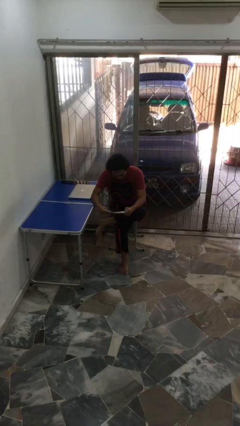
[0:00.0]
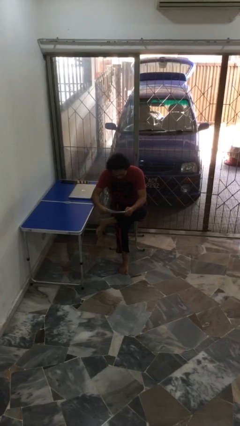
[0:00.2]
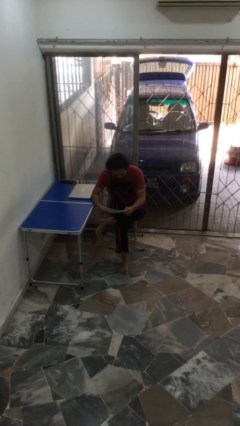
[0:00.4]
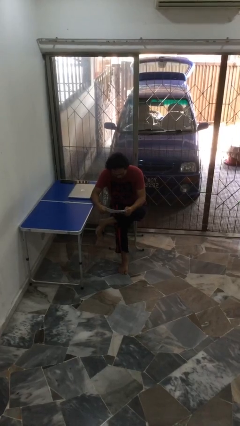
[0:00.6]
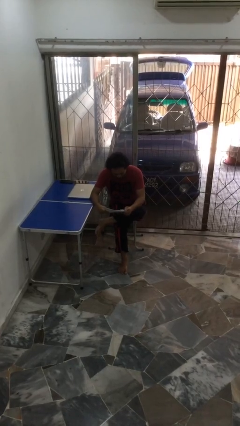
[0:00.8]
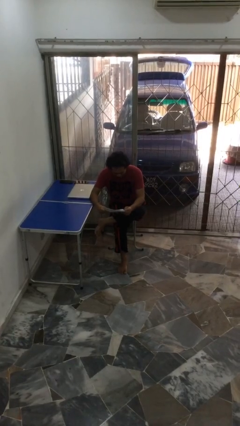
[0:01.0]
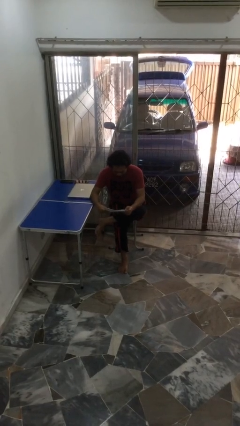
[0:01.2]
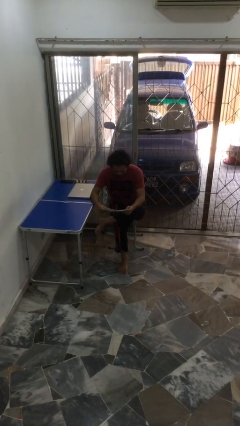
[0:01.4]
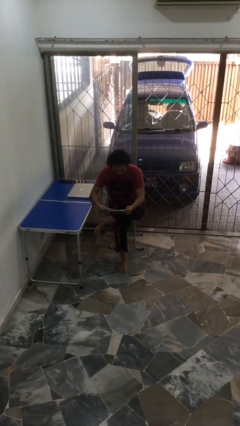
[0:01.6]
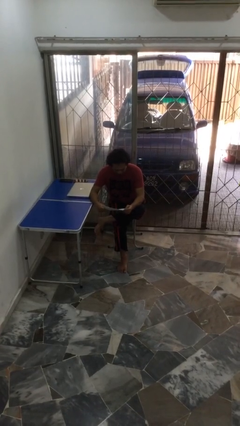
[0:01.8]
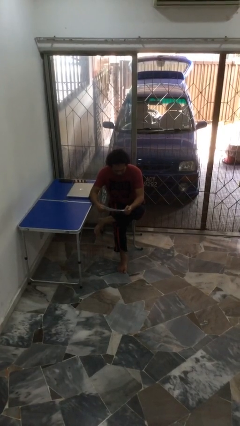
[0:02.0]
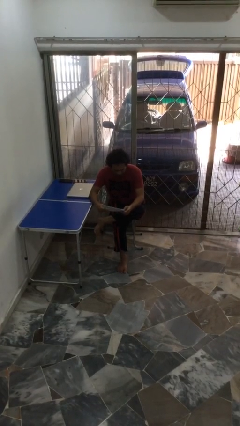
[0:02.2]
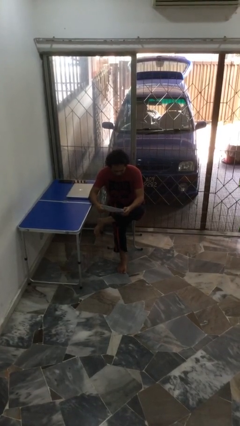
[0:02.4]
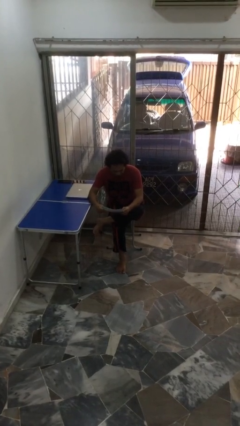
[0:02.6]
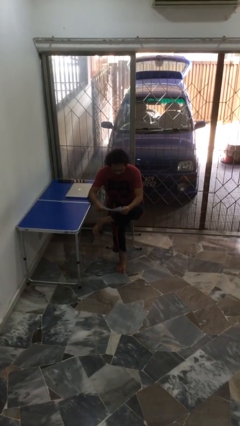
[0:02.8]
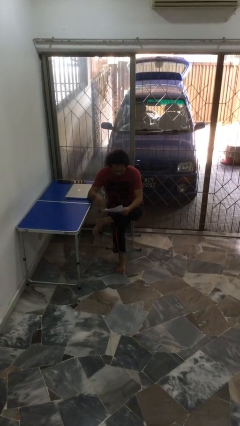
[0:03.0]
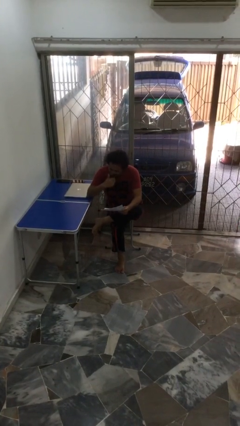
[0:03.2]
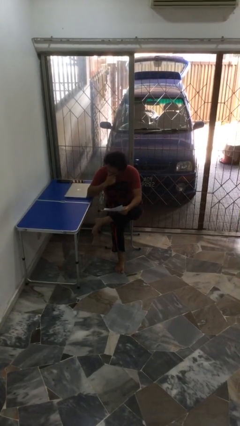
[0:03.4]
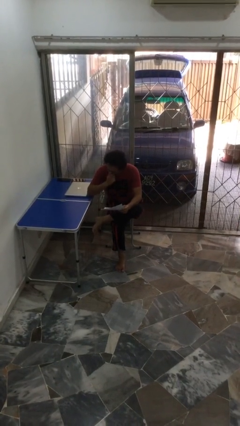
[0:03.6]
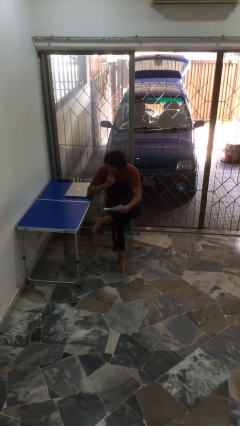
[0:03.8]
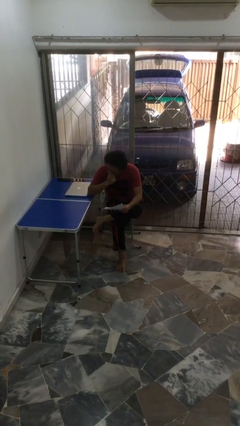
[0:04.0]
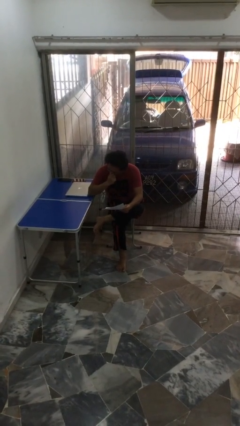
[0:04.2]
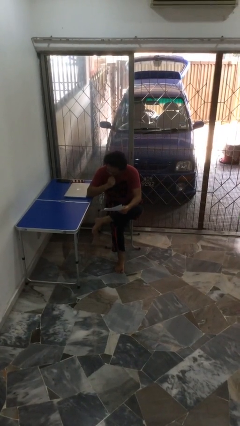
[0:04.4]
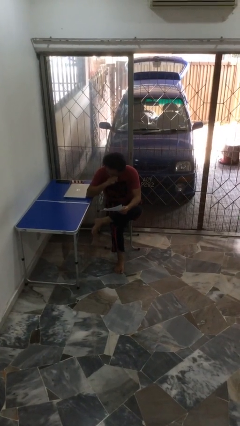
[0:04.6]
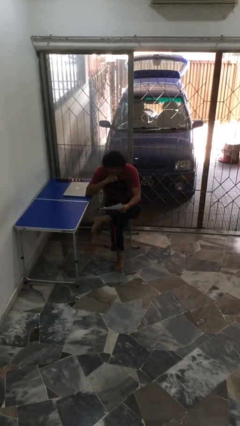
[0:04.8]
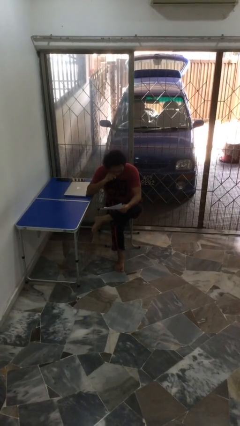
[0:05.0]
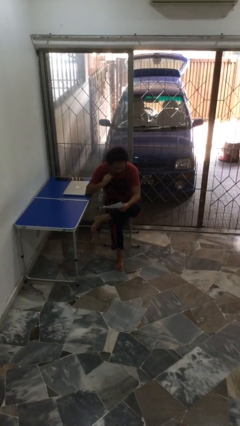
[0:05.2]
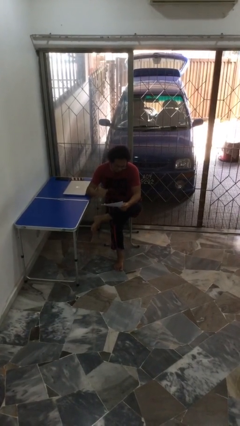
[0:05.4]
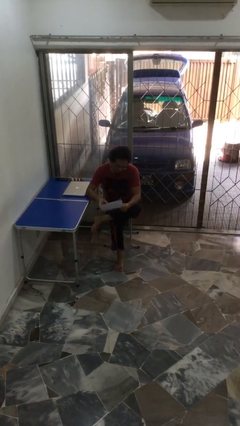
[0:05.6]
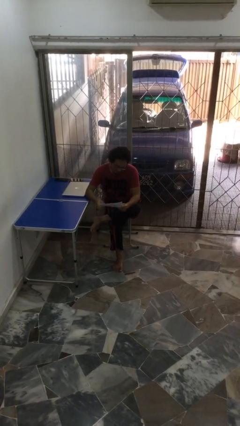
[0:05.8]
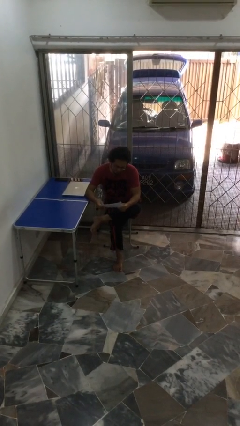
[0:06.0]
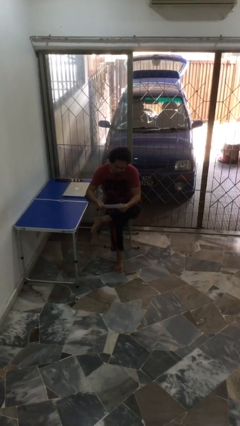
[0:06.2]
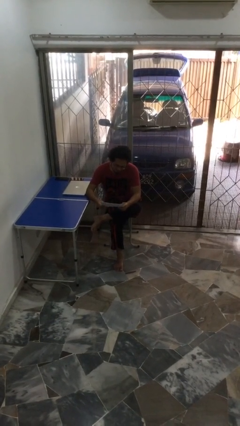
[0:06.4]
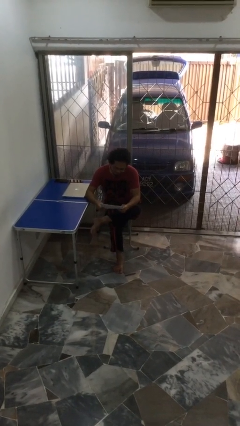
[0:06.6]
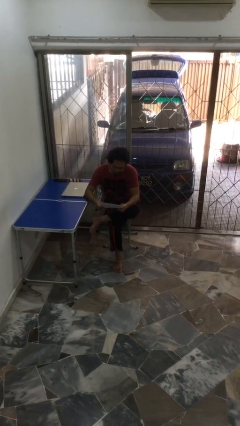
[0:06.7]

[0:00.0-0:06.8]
person reads document

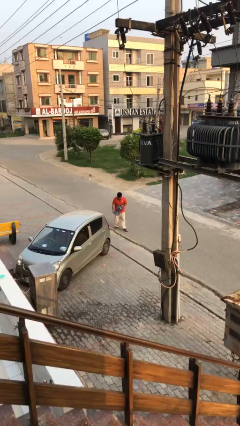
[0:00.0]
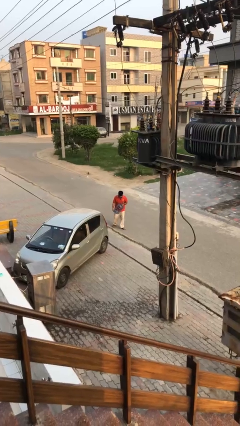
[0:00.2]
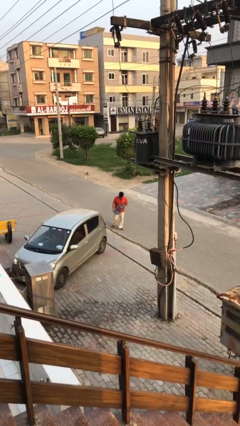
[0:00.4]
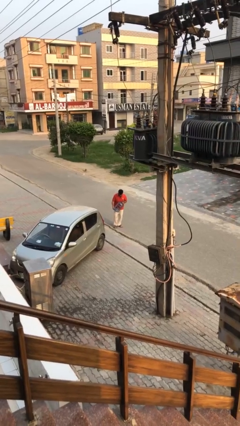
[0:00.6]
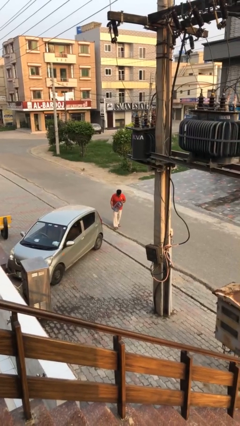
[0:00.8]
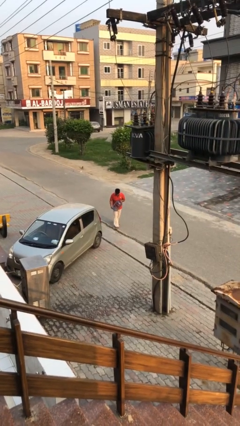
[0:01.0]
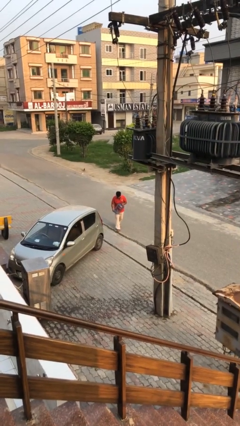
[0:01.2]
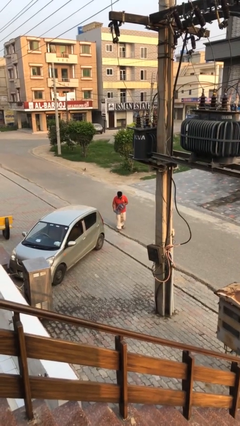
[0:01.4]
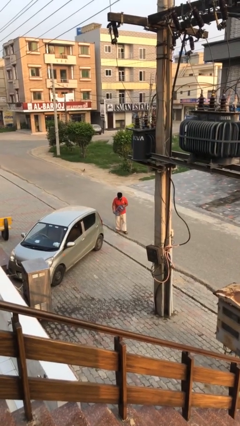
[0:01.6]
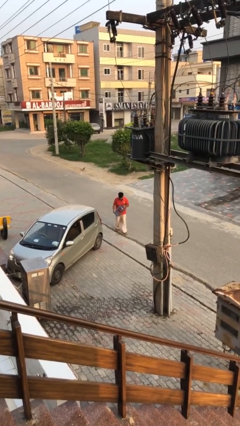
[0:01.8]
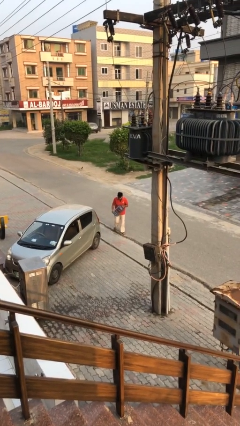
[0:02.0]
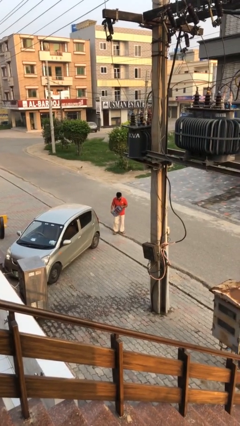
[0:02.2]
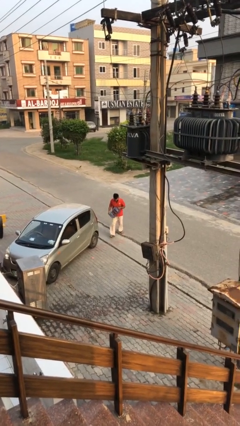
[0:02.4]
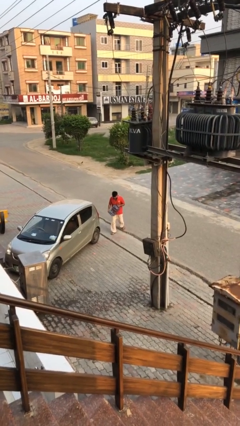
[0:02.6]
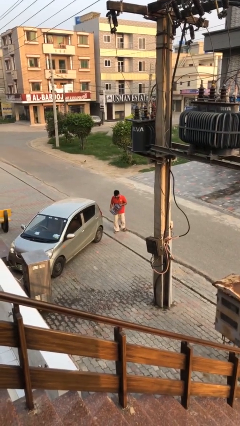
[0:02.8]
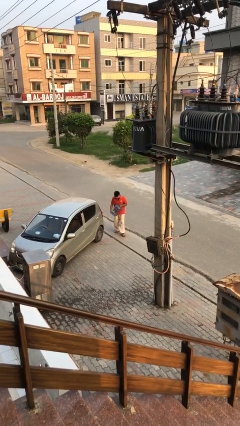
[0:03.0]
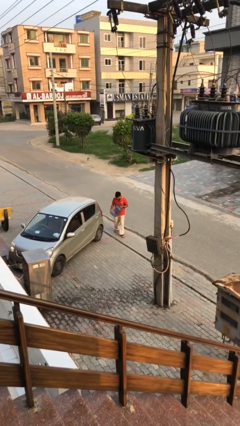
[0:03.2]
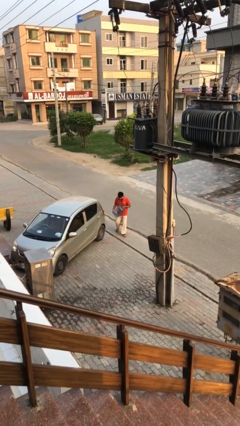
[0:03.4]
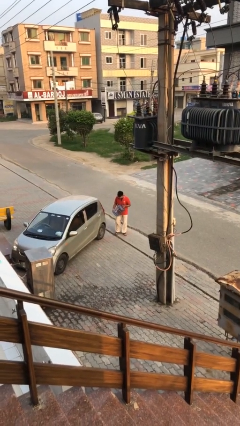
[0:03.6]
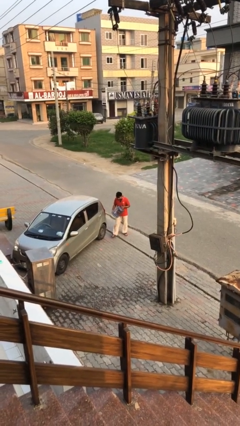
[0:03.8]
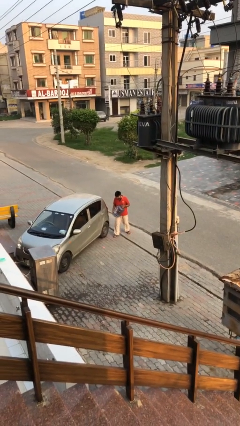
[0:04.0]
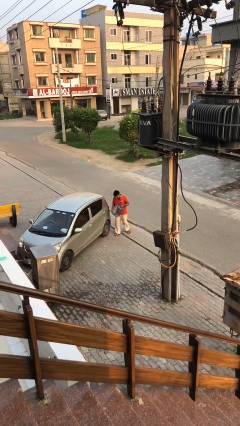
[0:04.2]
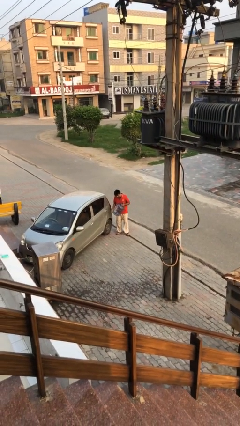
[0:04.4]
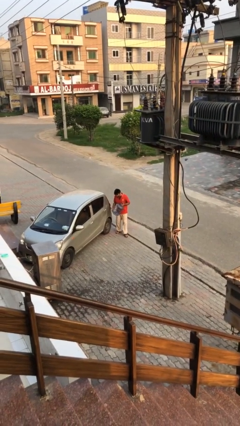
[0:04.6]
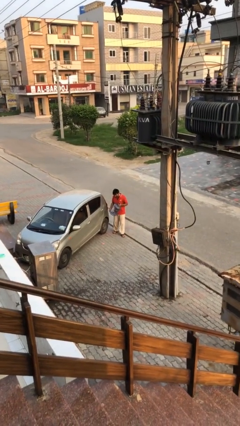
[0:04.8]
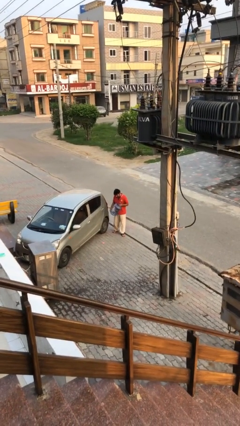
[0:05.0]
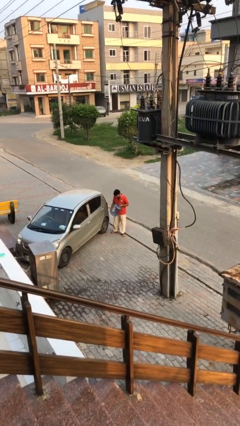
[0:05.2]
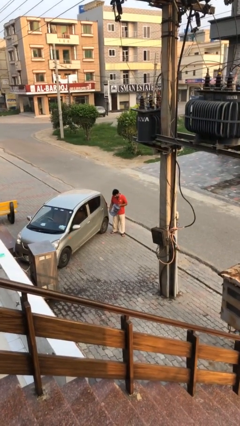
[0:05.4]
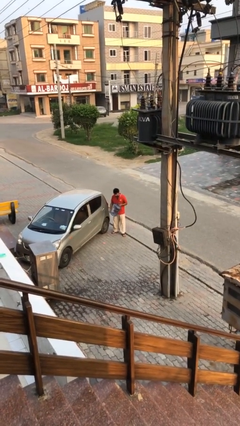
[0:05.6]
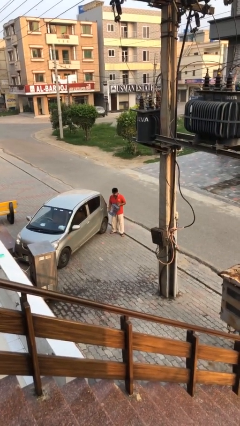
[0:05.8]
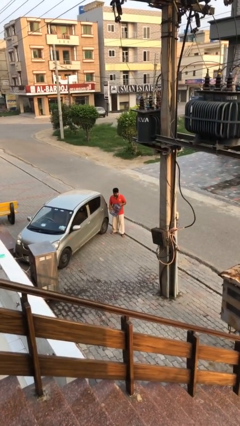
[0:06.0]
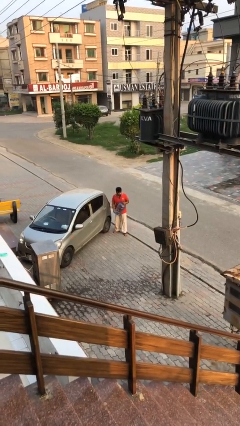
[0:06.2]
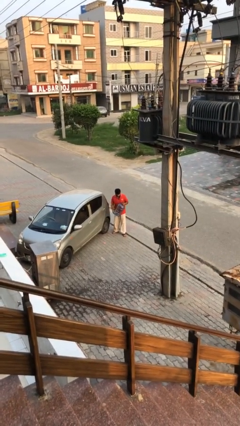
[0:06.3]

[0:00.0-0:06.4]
person carries heavy object

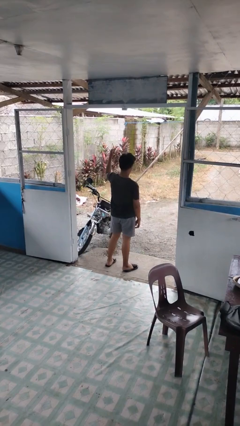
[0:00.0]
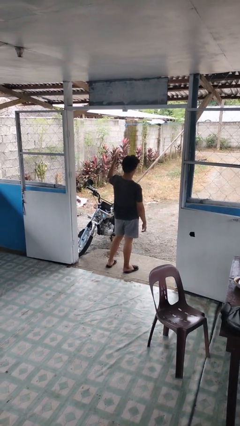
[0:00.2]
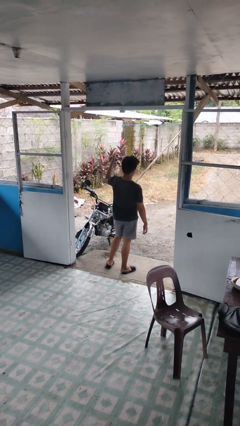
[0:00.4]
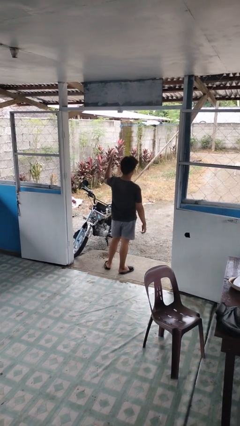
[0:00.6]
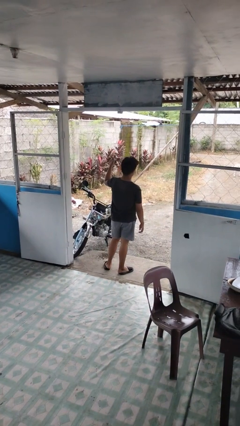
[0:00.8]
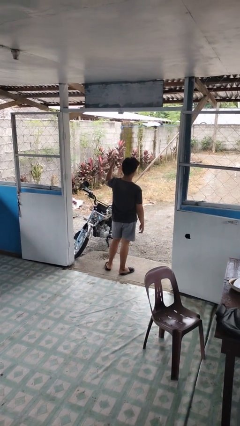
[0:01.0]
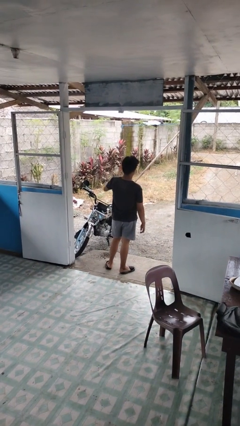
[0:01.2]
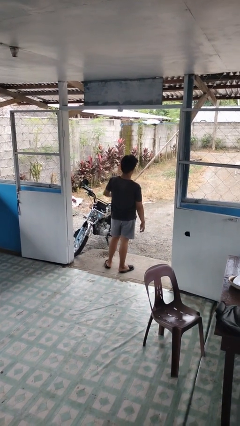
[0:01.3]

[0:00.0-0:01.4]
person gestures thumbs up

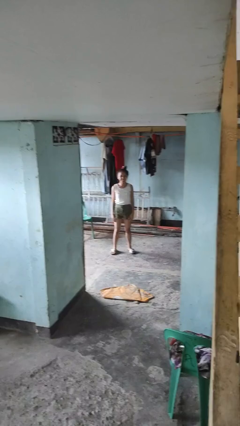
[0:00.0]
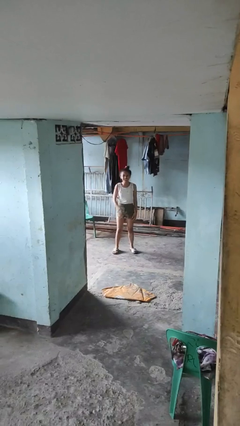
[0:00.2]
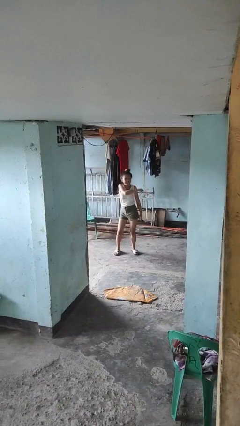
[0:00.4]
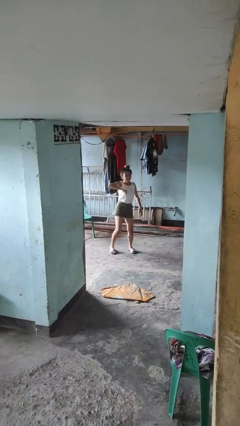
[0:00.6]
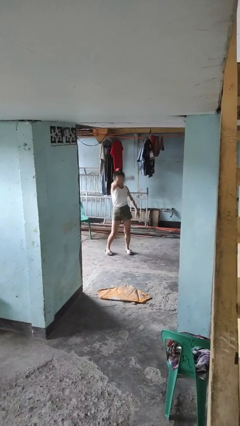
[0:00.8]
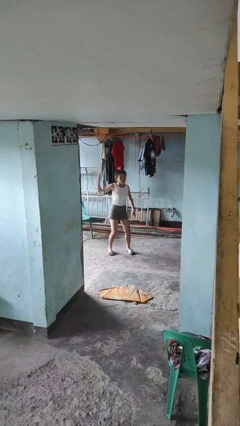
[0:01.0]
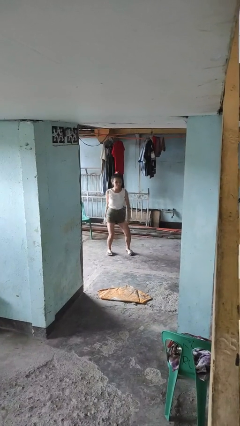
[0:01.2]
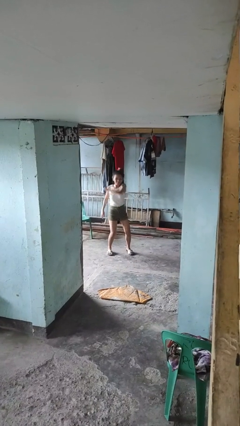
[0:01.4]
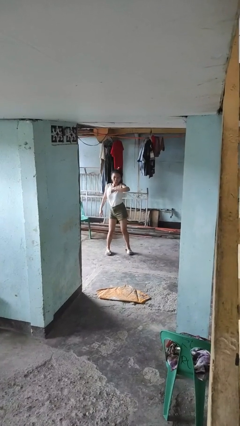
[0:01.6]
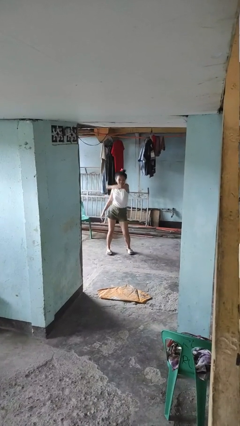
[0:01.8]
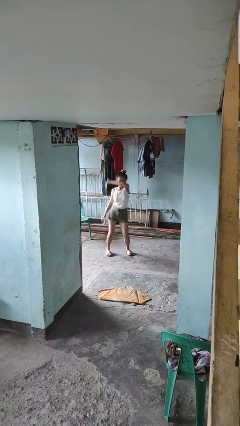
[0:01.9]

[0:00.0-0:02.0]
person dances in place

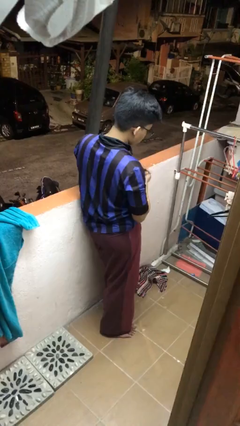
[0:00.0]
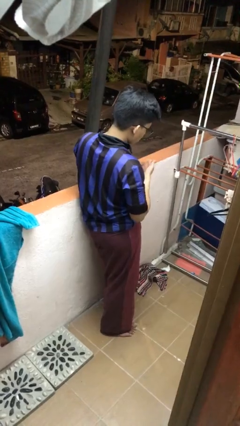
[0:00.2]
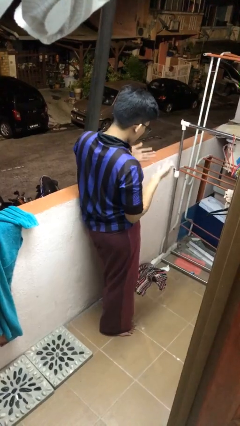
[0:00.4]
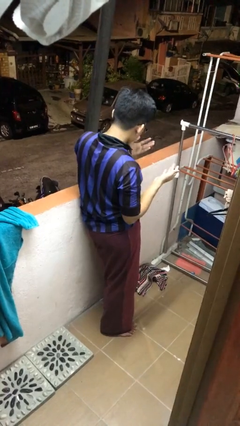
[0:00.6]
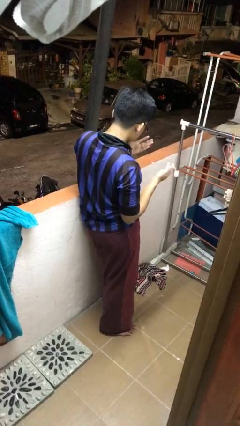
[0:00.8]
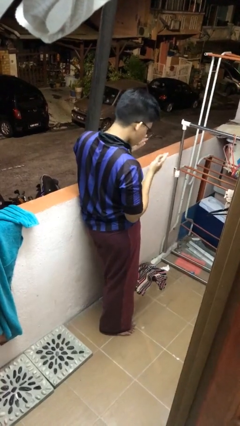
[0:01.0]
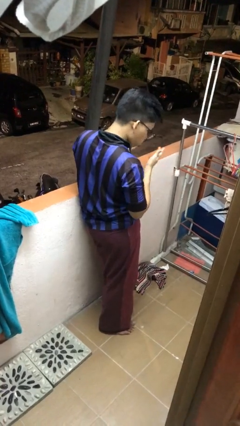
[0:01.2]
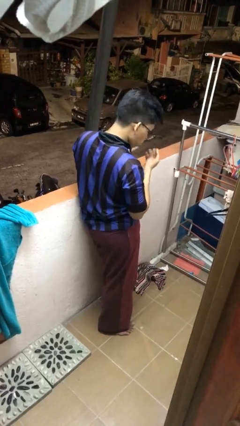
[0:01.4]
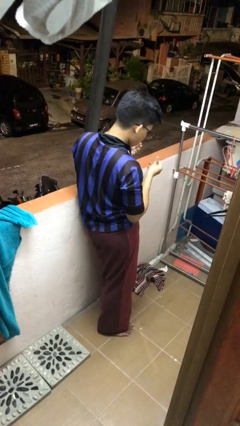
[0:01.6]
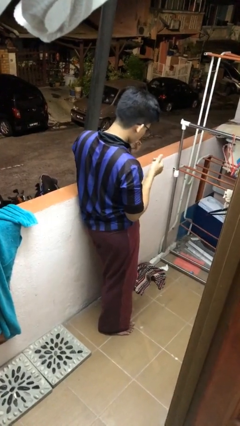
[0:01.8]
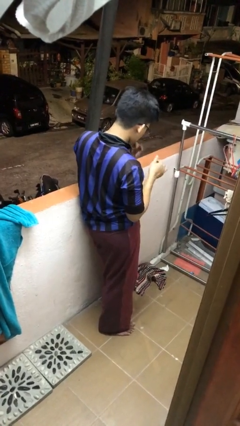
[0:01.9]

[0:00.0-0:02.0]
person blows into hands
